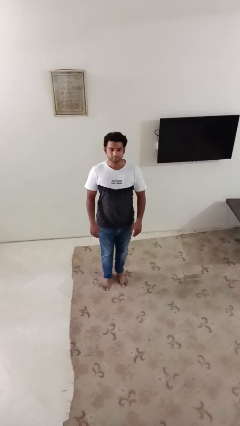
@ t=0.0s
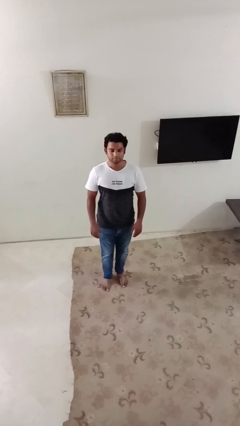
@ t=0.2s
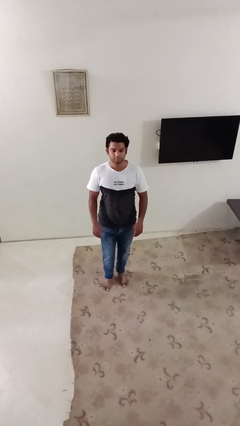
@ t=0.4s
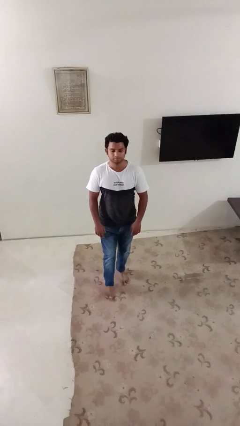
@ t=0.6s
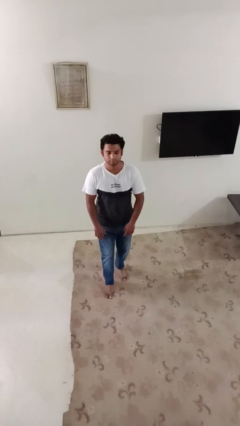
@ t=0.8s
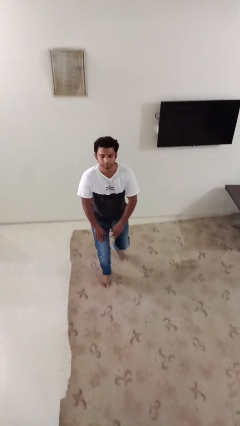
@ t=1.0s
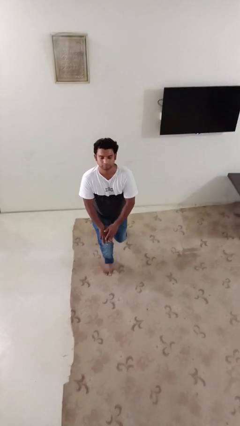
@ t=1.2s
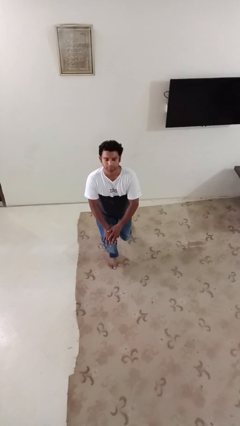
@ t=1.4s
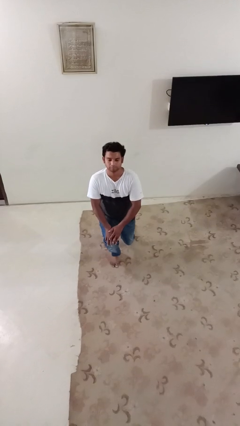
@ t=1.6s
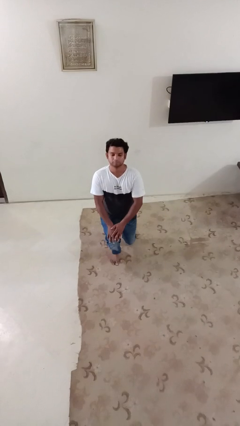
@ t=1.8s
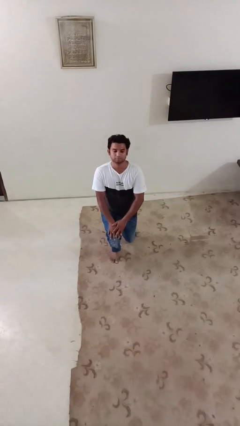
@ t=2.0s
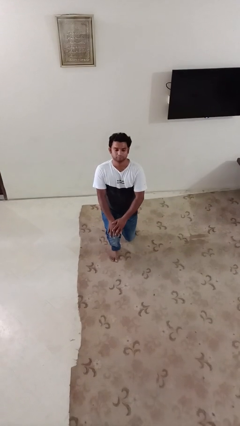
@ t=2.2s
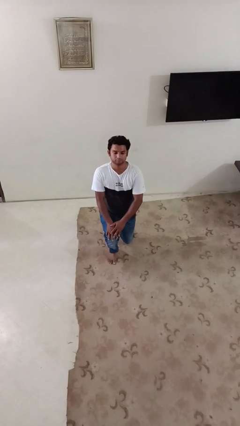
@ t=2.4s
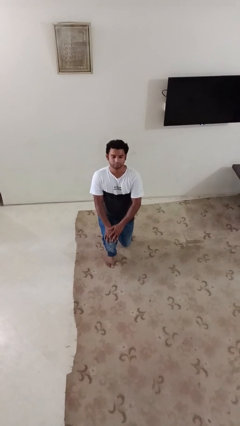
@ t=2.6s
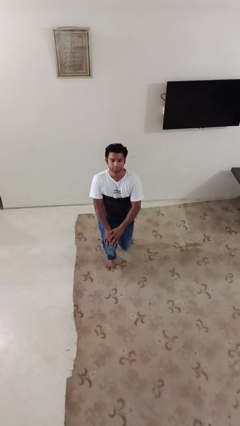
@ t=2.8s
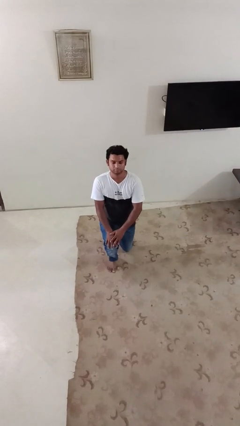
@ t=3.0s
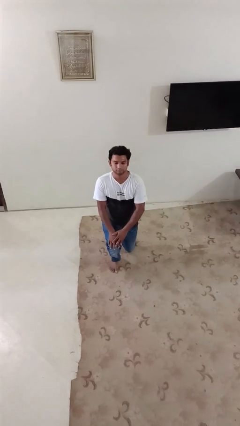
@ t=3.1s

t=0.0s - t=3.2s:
person kneels

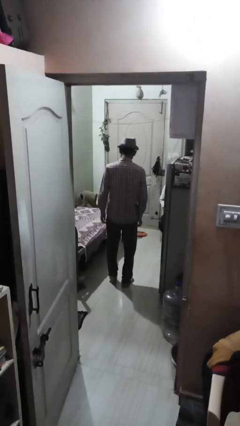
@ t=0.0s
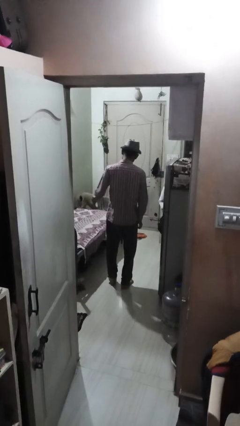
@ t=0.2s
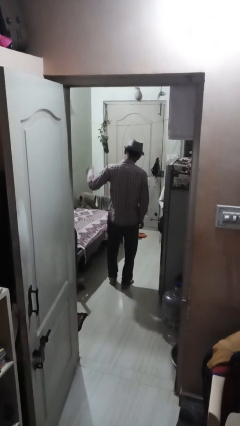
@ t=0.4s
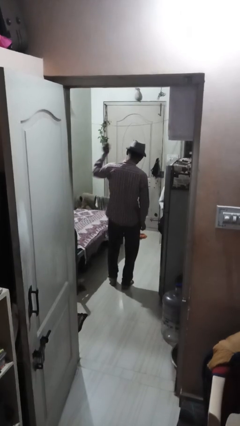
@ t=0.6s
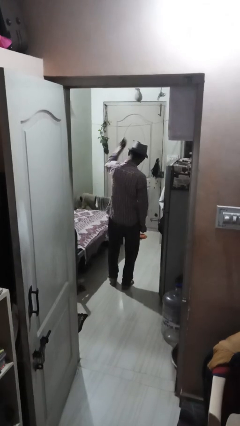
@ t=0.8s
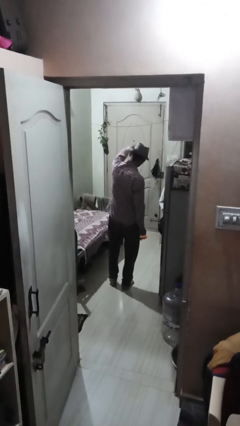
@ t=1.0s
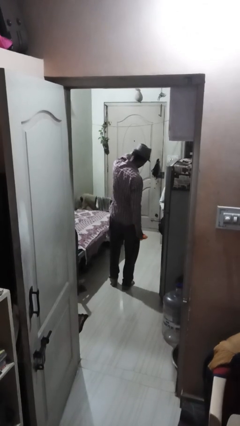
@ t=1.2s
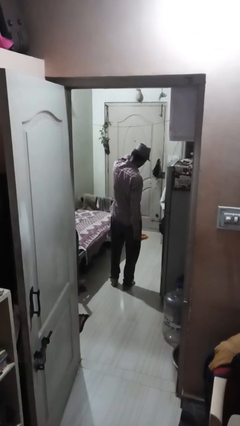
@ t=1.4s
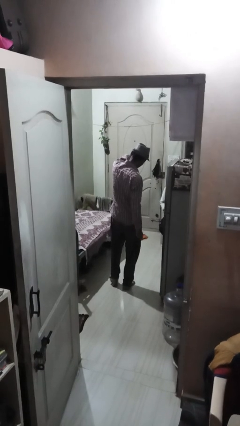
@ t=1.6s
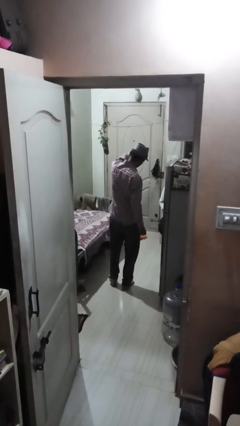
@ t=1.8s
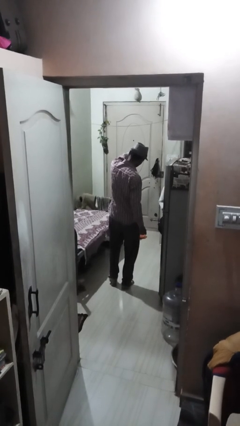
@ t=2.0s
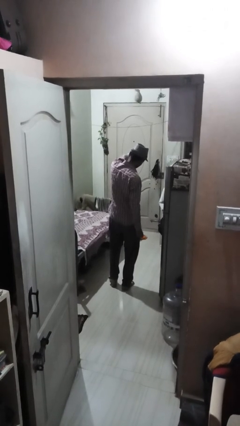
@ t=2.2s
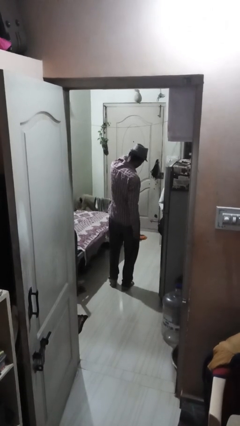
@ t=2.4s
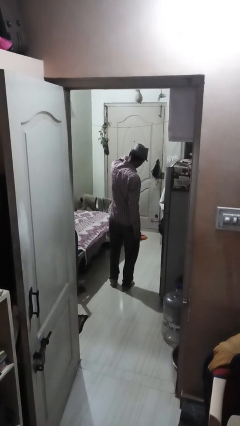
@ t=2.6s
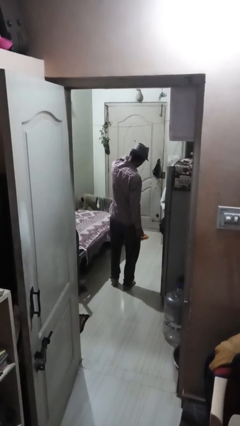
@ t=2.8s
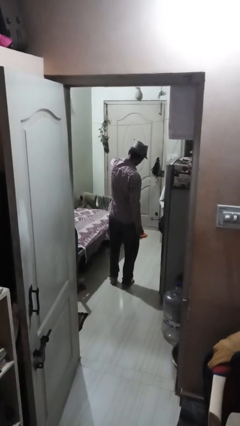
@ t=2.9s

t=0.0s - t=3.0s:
person points at person

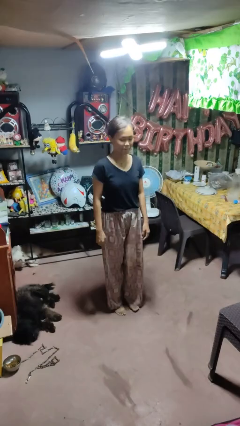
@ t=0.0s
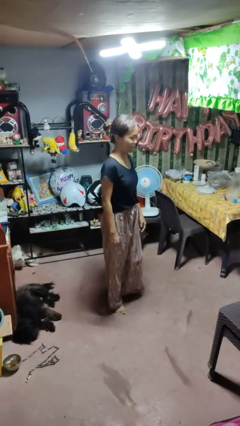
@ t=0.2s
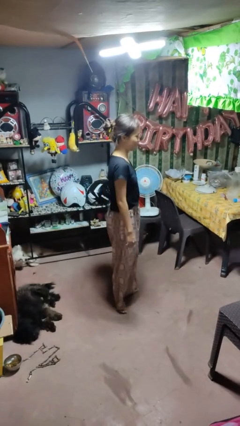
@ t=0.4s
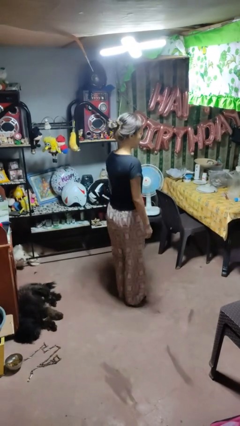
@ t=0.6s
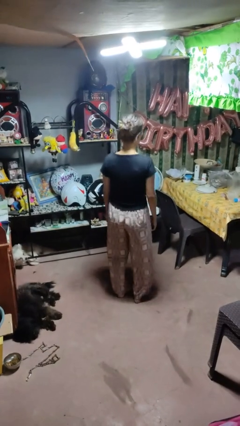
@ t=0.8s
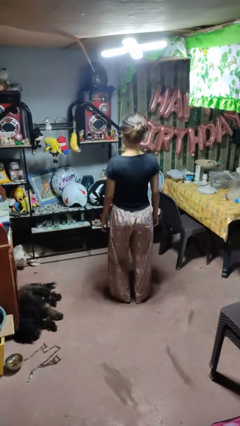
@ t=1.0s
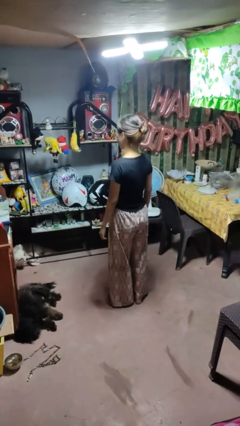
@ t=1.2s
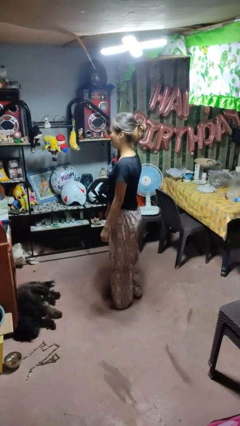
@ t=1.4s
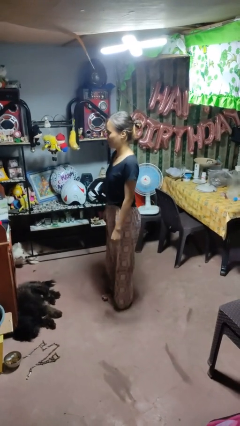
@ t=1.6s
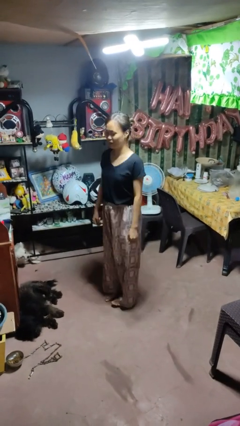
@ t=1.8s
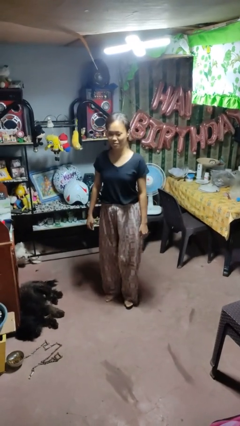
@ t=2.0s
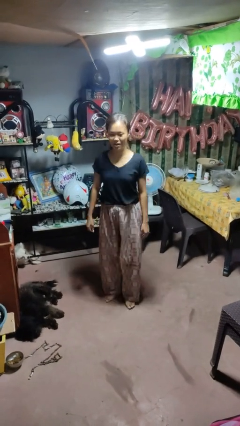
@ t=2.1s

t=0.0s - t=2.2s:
person twirls

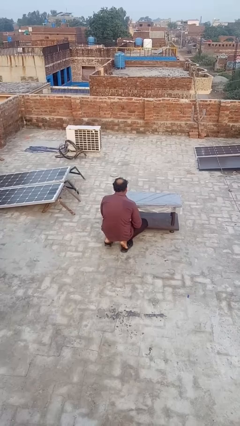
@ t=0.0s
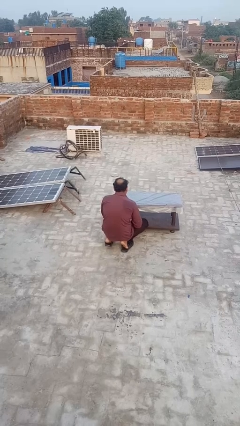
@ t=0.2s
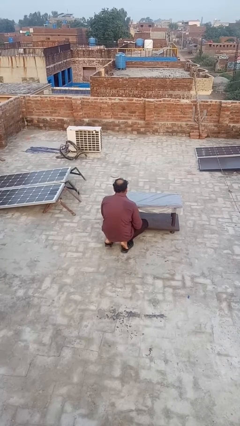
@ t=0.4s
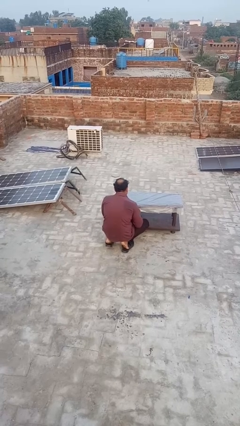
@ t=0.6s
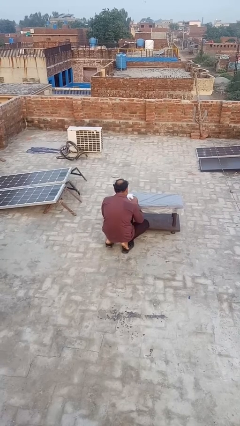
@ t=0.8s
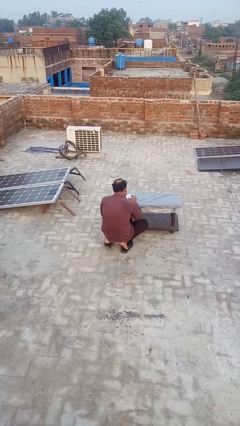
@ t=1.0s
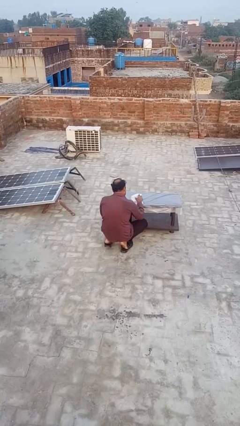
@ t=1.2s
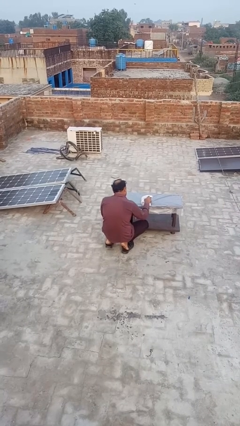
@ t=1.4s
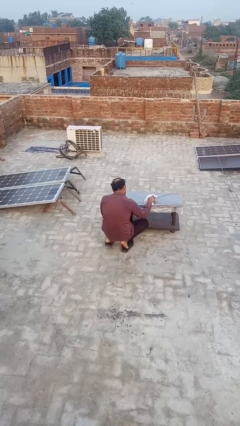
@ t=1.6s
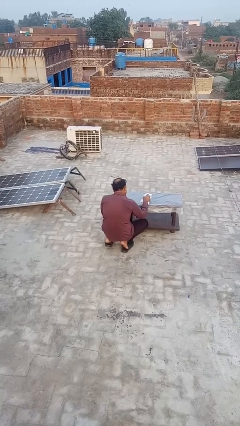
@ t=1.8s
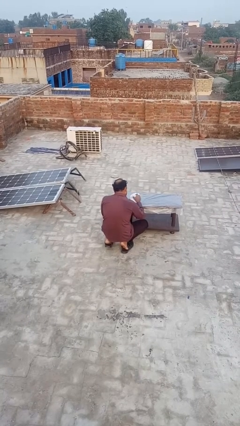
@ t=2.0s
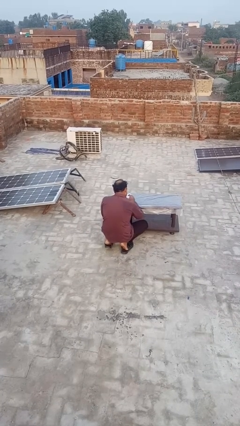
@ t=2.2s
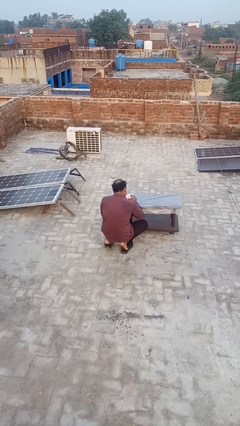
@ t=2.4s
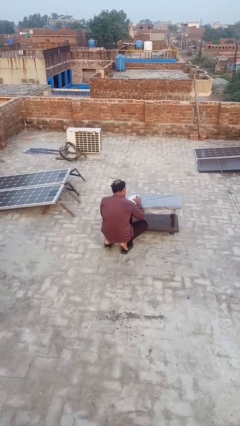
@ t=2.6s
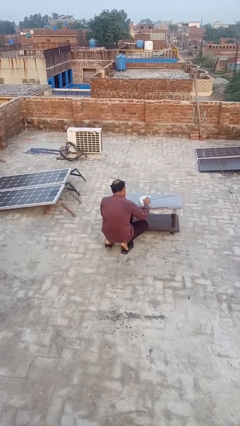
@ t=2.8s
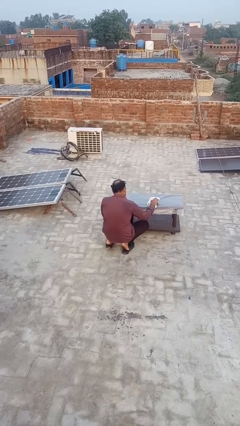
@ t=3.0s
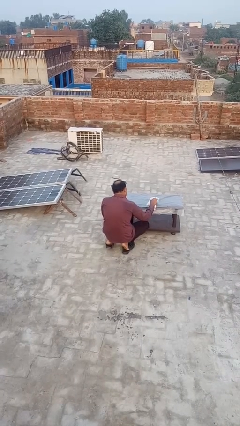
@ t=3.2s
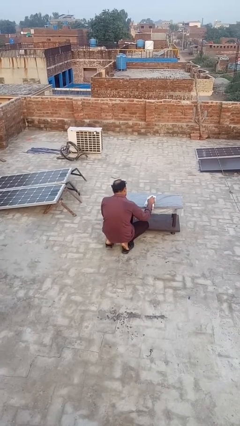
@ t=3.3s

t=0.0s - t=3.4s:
person cleans table with rag

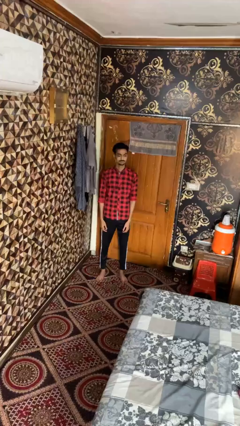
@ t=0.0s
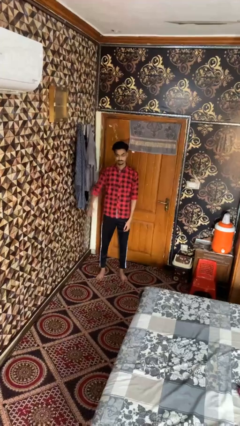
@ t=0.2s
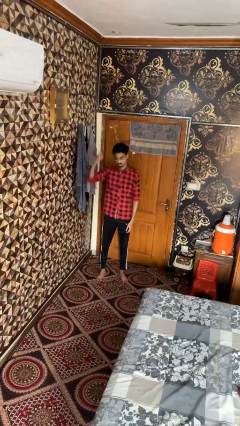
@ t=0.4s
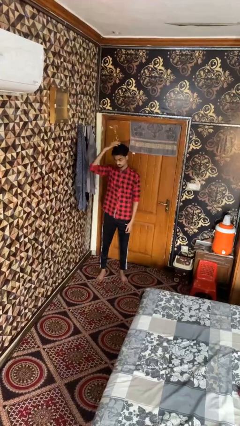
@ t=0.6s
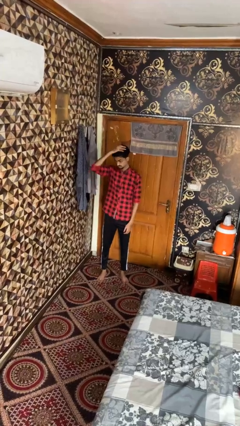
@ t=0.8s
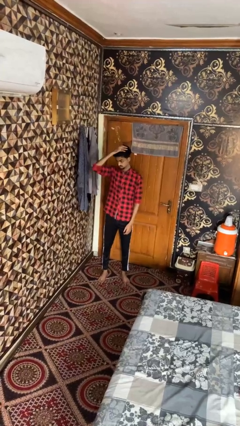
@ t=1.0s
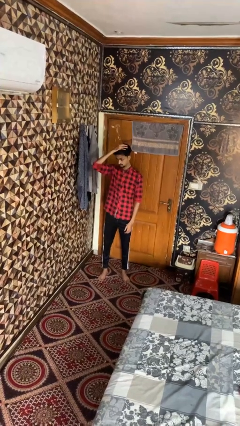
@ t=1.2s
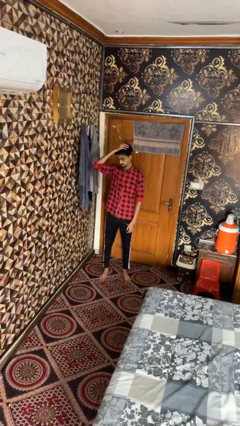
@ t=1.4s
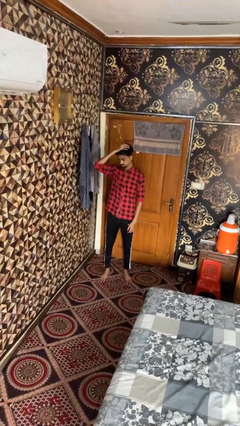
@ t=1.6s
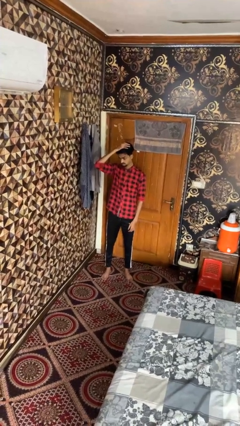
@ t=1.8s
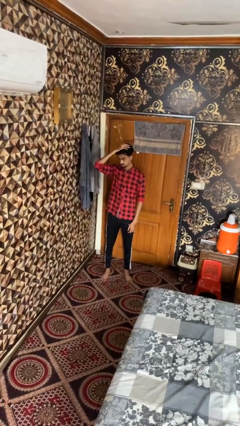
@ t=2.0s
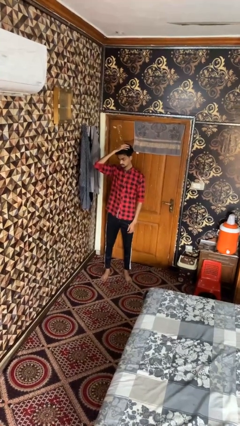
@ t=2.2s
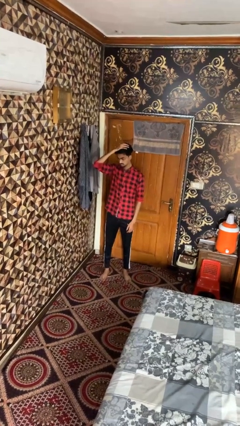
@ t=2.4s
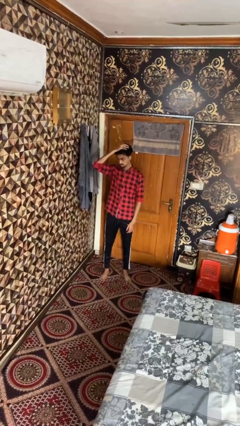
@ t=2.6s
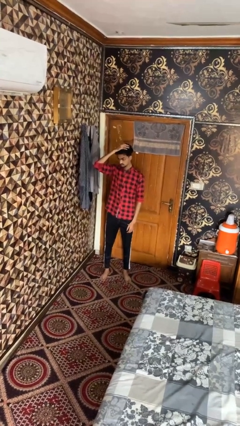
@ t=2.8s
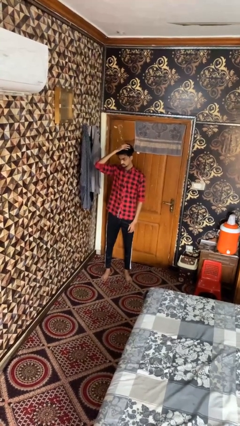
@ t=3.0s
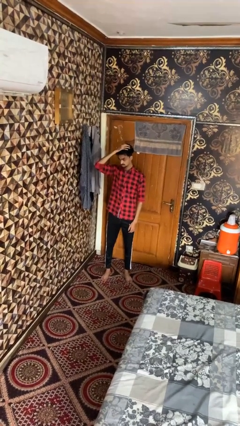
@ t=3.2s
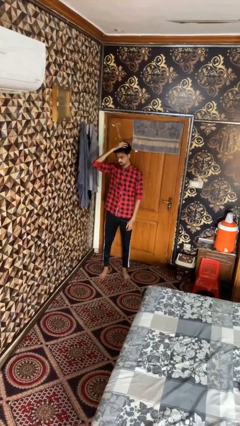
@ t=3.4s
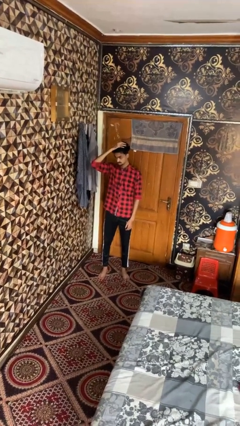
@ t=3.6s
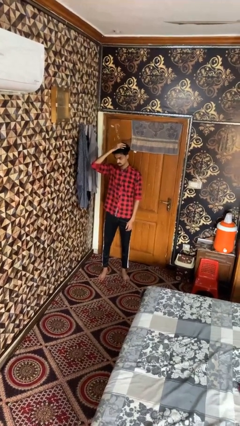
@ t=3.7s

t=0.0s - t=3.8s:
person pats head

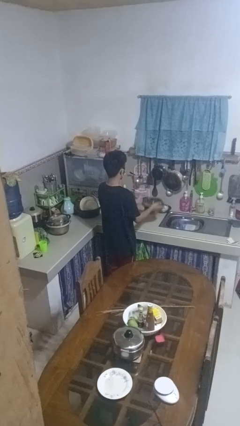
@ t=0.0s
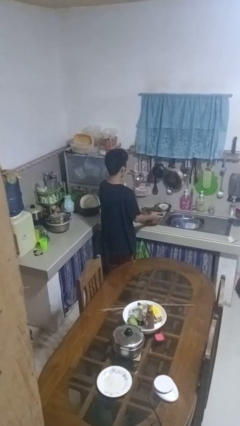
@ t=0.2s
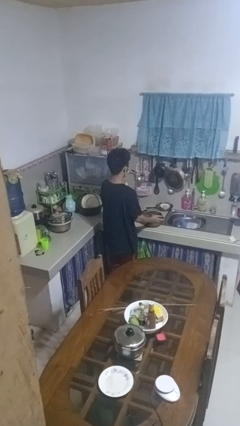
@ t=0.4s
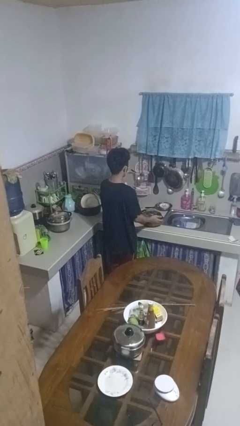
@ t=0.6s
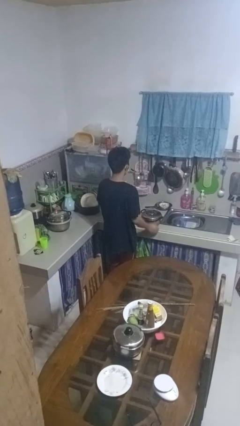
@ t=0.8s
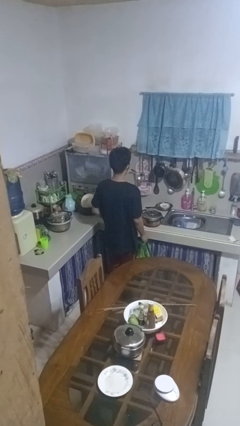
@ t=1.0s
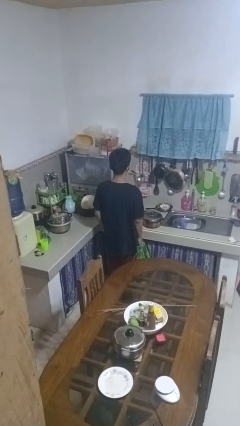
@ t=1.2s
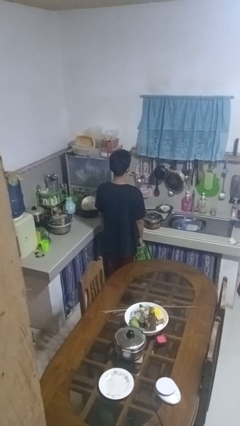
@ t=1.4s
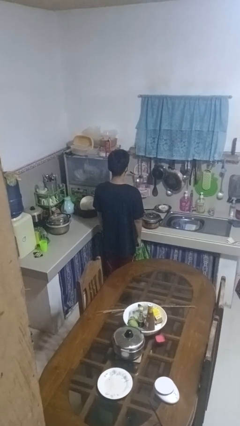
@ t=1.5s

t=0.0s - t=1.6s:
person puts down object on countertop

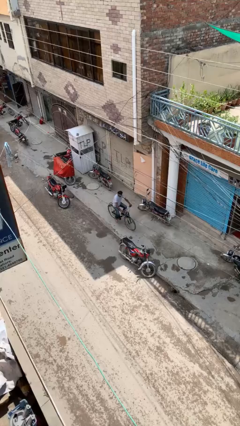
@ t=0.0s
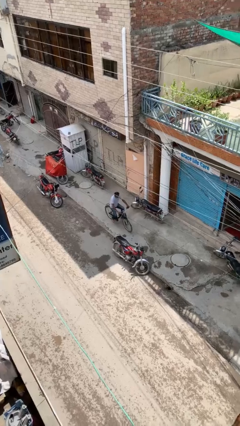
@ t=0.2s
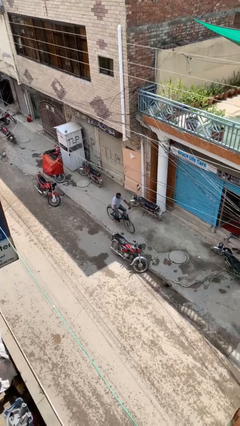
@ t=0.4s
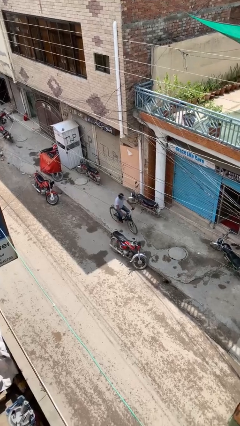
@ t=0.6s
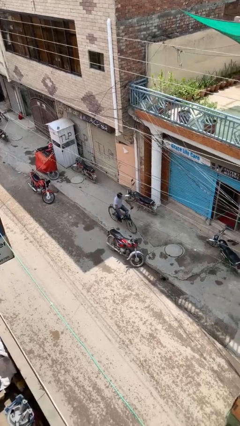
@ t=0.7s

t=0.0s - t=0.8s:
person rides bicycle
